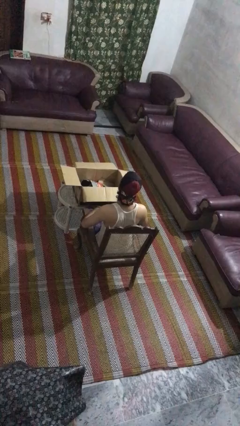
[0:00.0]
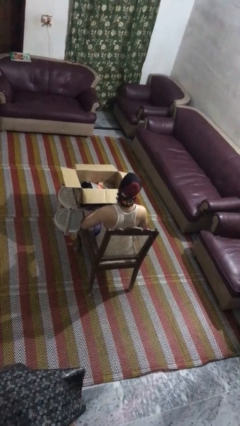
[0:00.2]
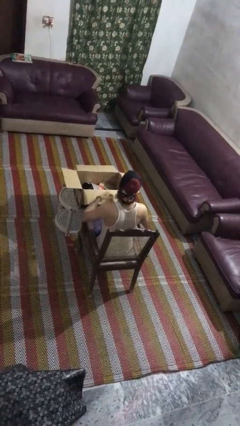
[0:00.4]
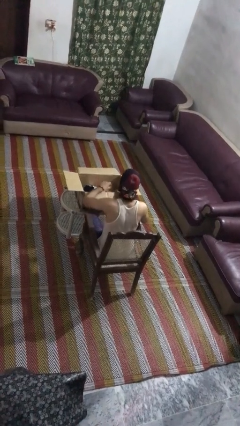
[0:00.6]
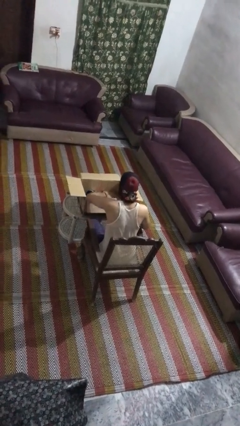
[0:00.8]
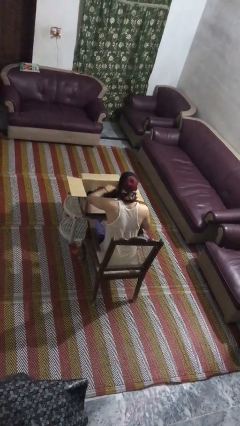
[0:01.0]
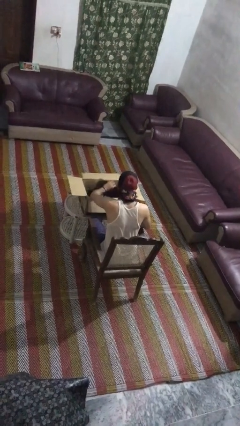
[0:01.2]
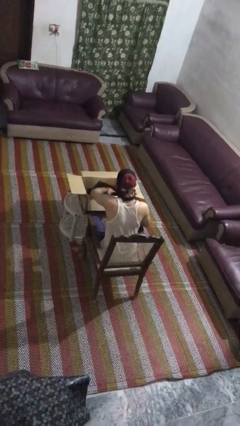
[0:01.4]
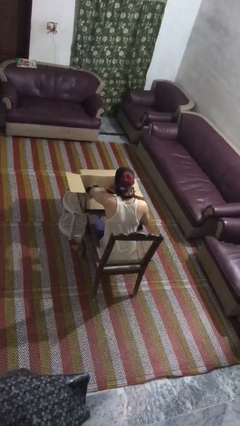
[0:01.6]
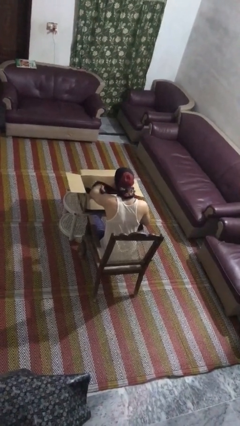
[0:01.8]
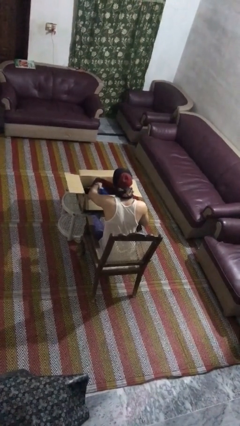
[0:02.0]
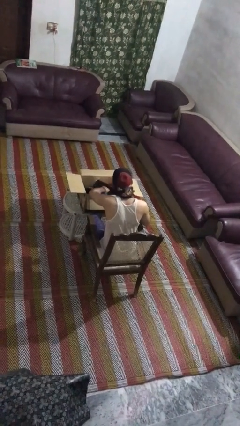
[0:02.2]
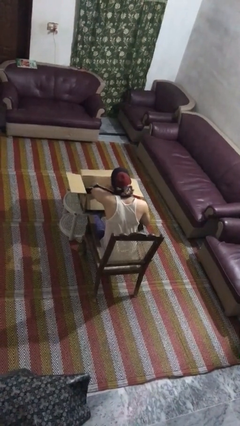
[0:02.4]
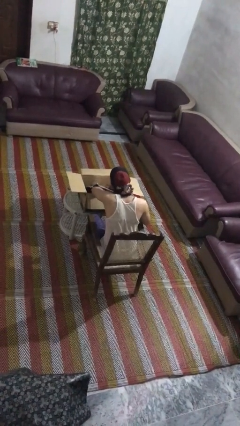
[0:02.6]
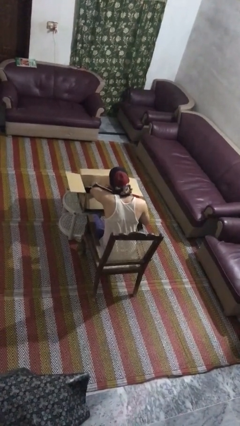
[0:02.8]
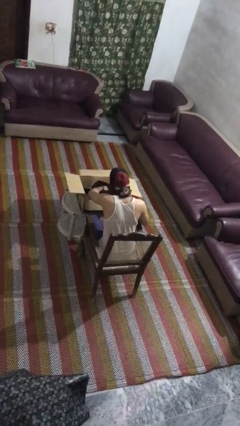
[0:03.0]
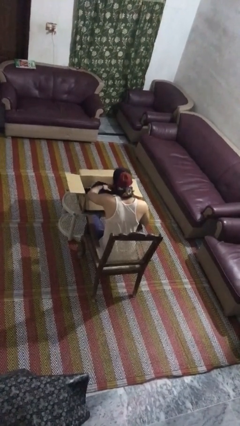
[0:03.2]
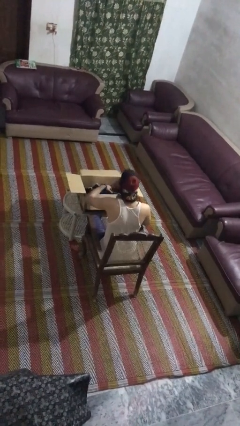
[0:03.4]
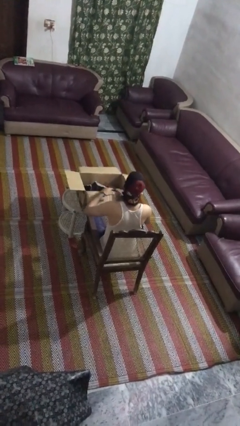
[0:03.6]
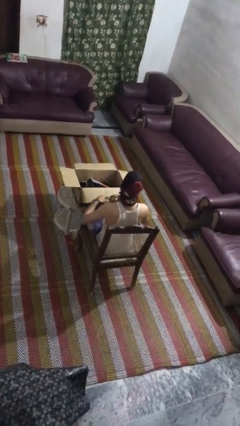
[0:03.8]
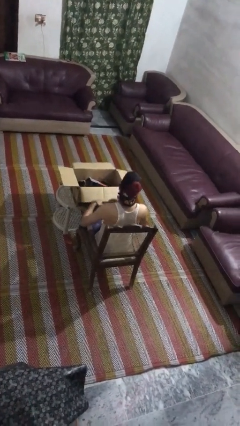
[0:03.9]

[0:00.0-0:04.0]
person searches in box

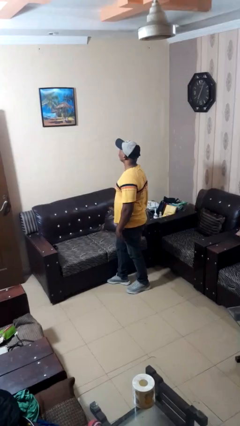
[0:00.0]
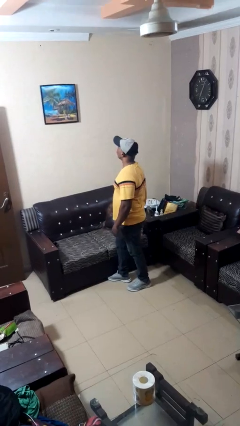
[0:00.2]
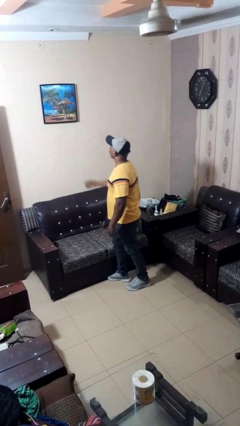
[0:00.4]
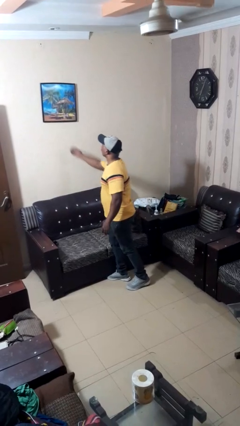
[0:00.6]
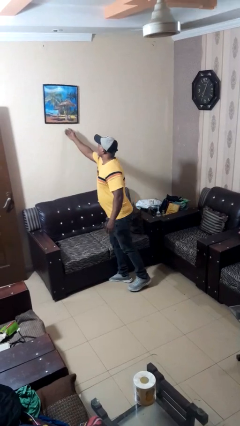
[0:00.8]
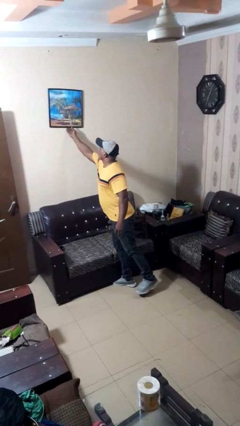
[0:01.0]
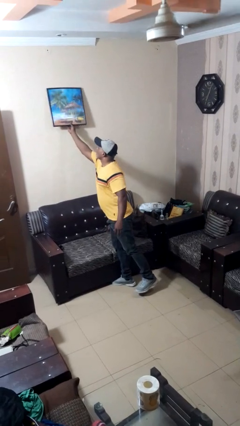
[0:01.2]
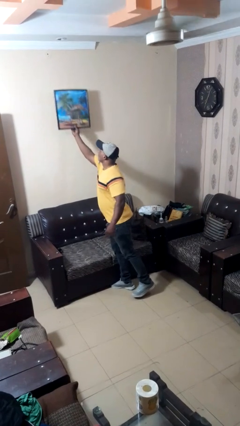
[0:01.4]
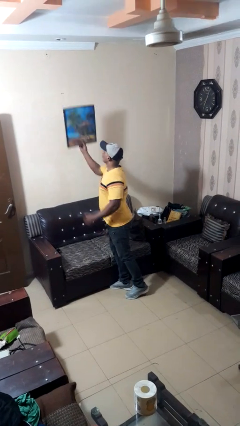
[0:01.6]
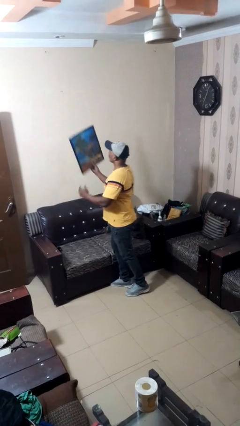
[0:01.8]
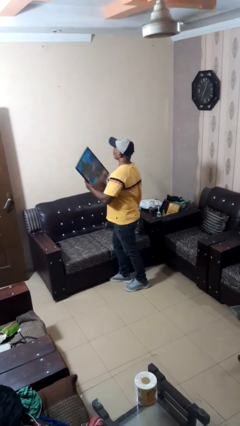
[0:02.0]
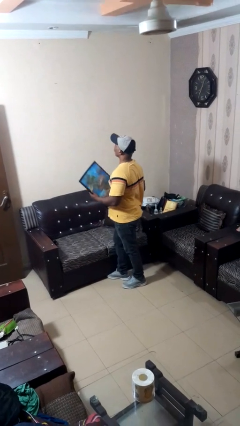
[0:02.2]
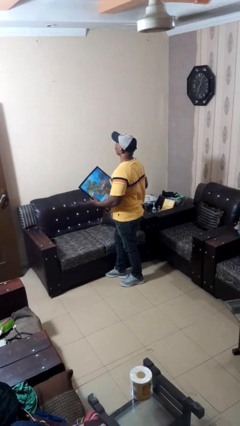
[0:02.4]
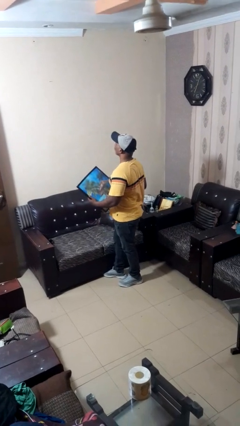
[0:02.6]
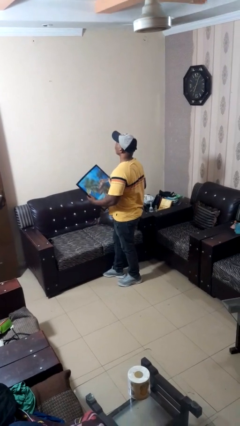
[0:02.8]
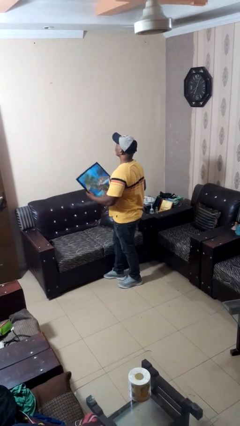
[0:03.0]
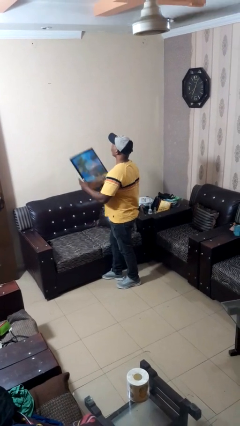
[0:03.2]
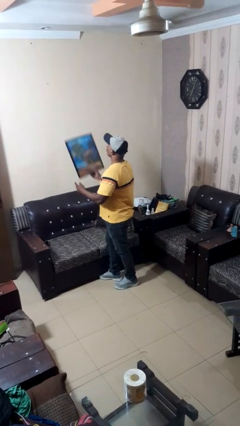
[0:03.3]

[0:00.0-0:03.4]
person takes down picture frame

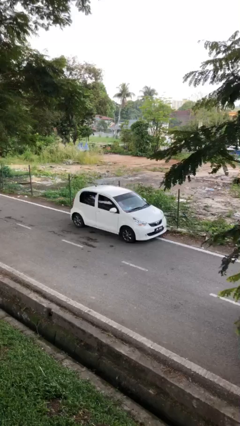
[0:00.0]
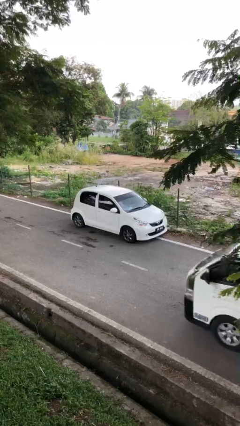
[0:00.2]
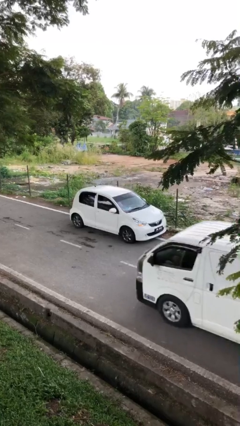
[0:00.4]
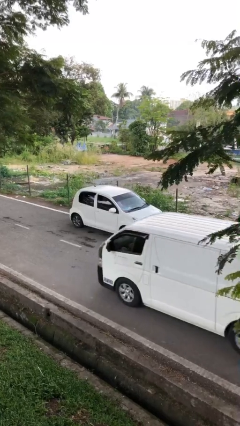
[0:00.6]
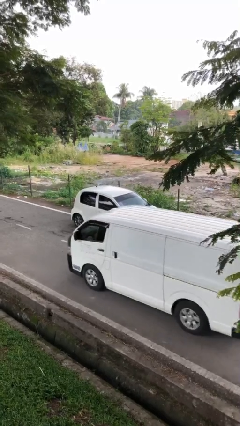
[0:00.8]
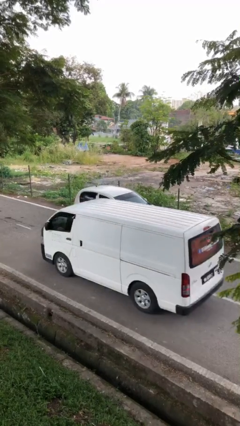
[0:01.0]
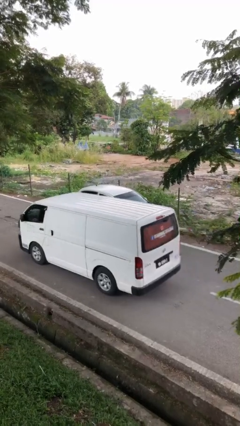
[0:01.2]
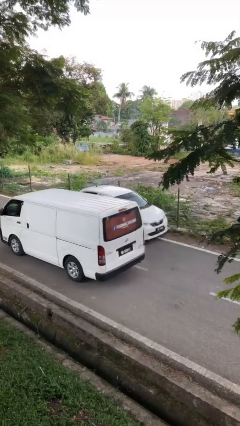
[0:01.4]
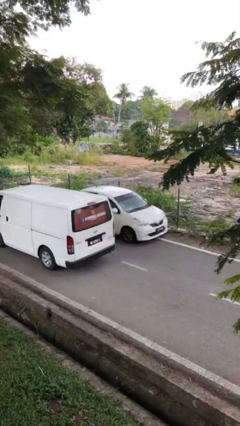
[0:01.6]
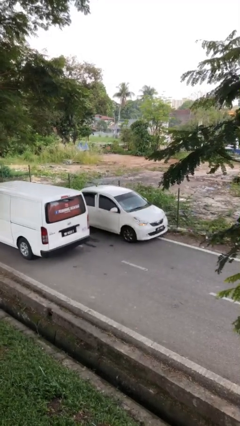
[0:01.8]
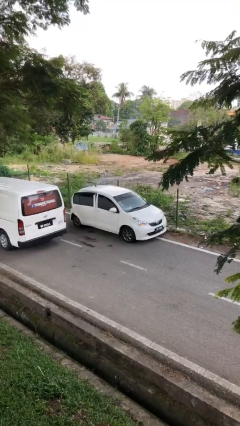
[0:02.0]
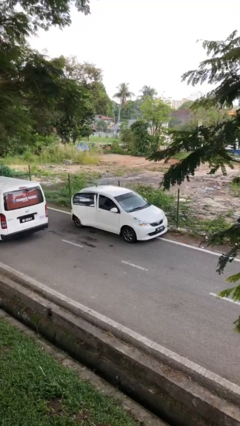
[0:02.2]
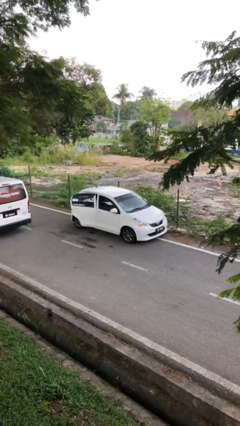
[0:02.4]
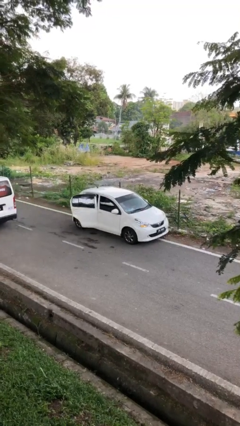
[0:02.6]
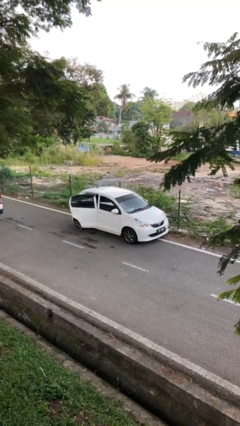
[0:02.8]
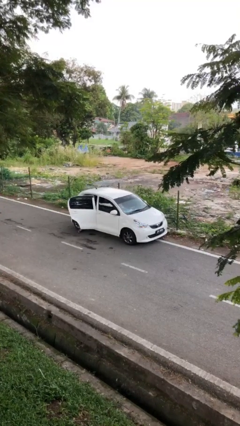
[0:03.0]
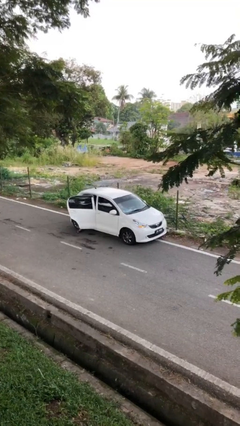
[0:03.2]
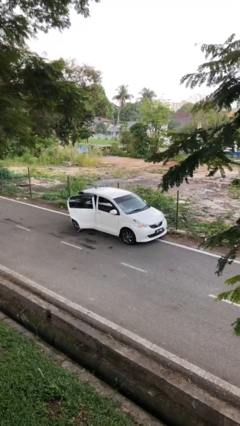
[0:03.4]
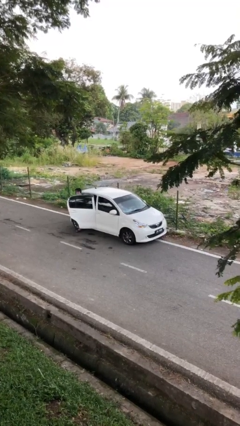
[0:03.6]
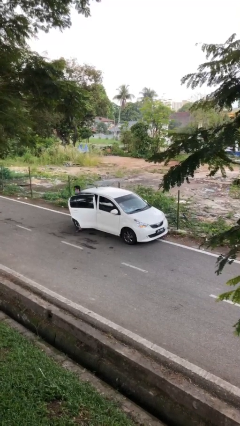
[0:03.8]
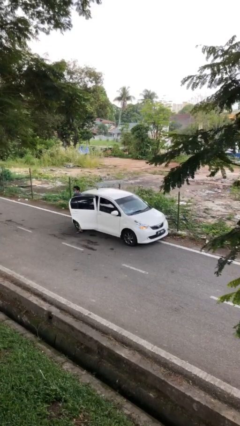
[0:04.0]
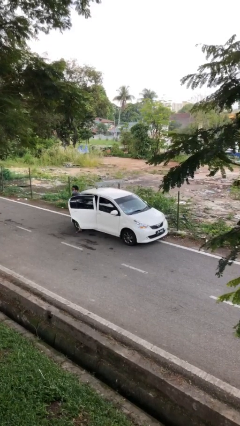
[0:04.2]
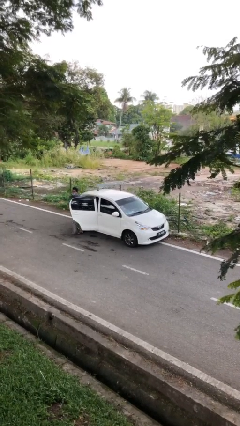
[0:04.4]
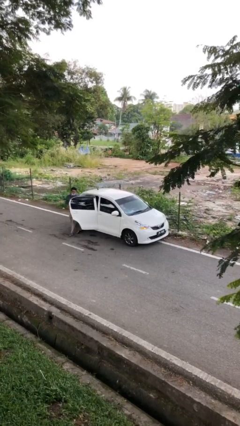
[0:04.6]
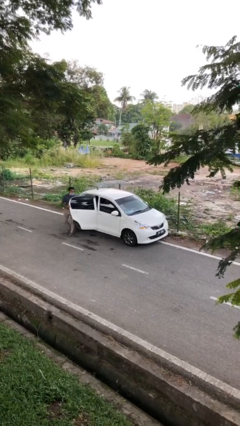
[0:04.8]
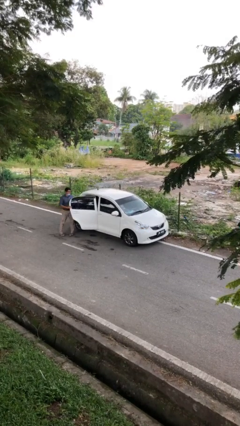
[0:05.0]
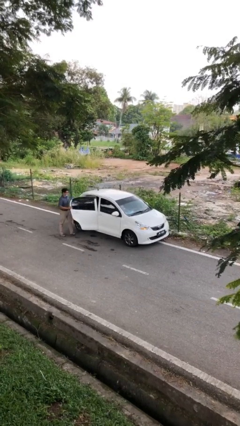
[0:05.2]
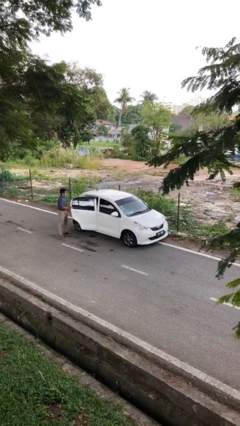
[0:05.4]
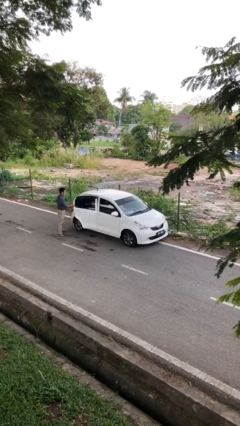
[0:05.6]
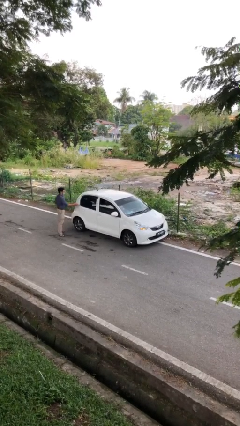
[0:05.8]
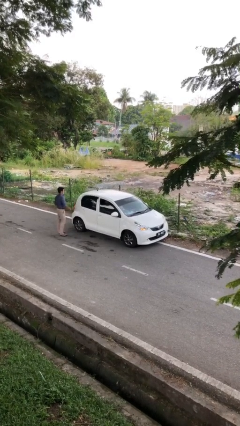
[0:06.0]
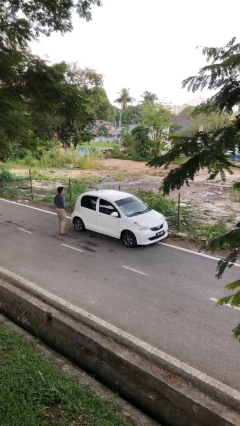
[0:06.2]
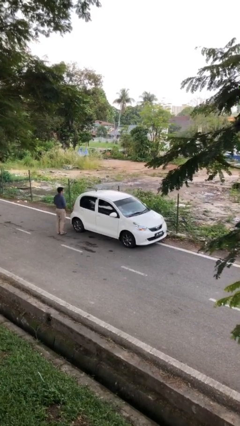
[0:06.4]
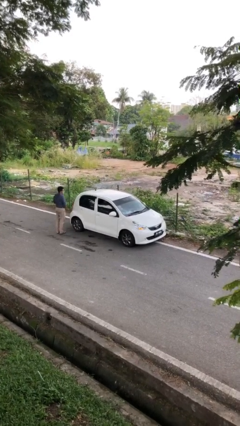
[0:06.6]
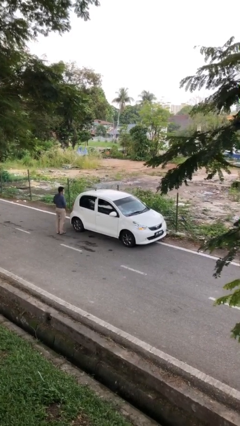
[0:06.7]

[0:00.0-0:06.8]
car drops off person

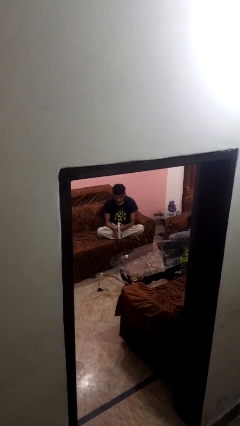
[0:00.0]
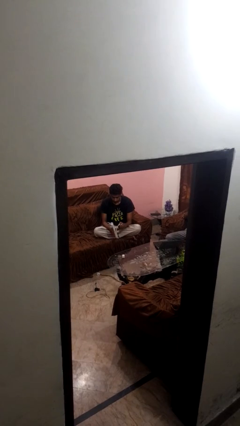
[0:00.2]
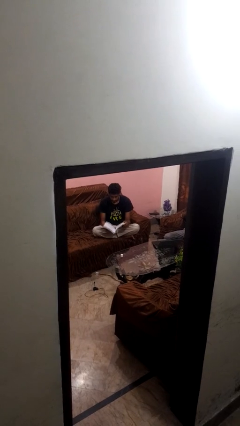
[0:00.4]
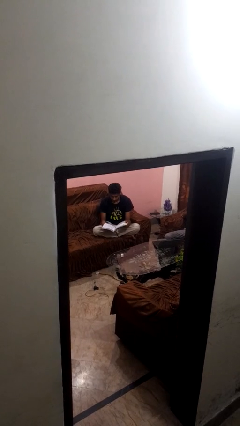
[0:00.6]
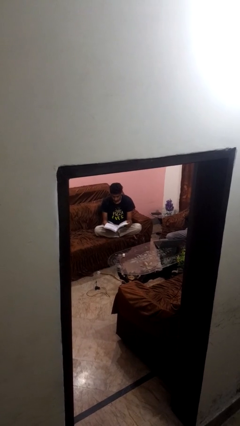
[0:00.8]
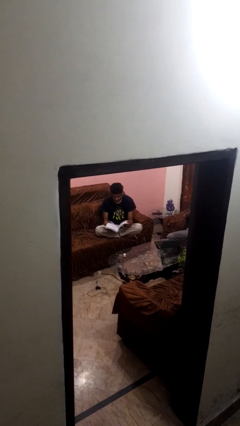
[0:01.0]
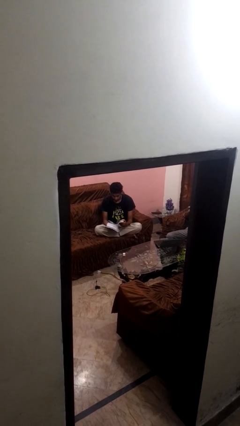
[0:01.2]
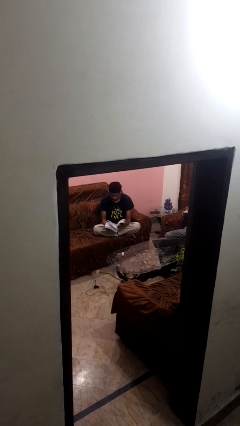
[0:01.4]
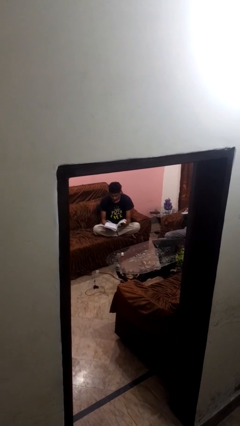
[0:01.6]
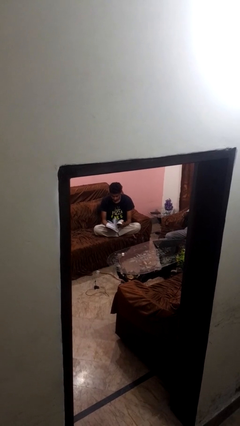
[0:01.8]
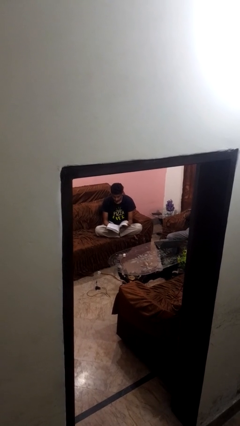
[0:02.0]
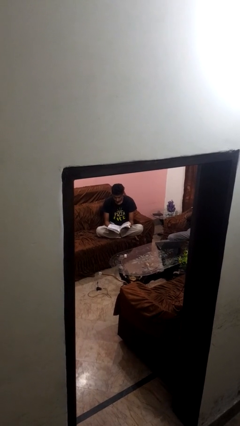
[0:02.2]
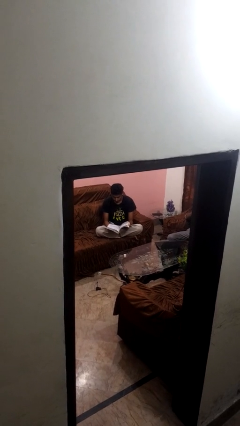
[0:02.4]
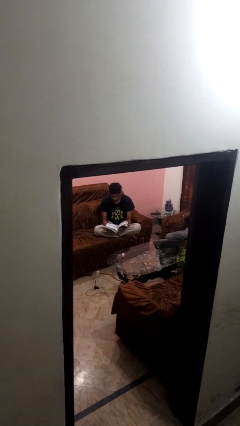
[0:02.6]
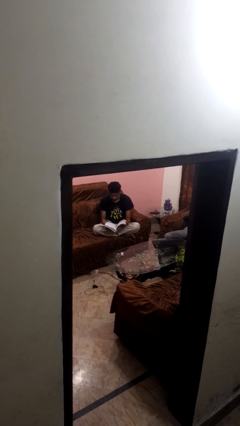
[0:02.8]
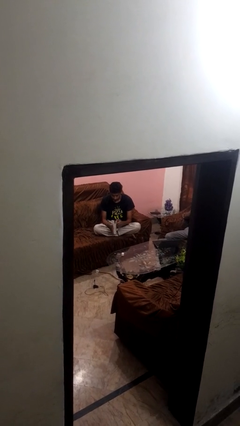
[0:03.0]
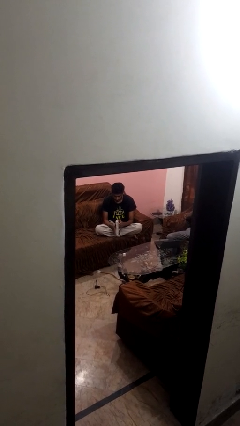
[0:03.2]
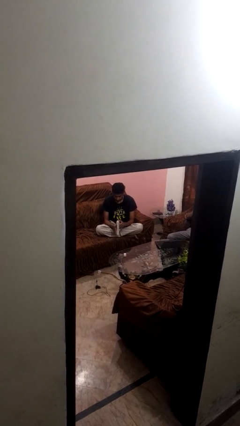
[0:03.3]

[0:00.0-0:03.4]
person reads book
